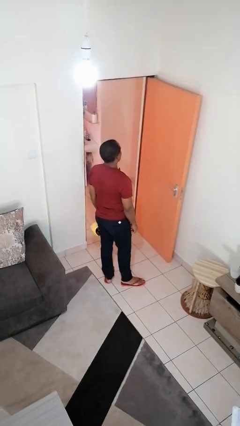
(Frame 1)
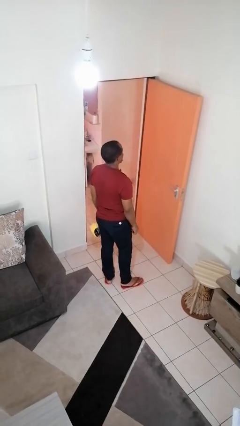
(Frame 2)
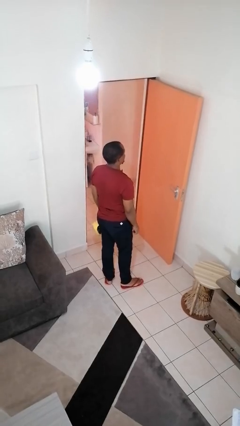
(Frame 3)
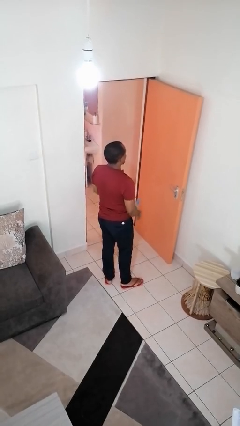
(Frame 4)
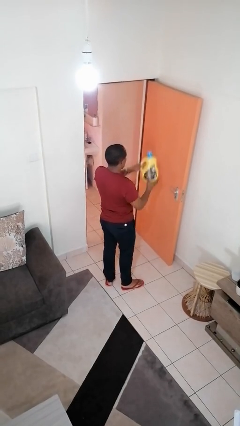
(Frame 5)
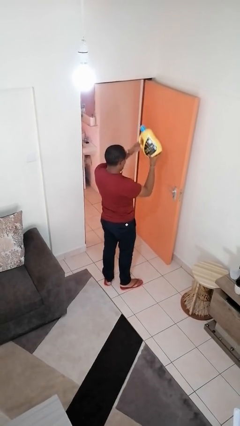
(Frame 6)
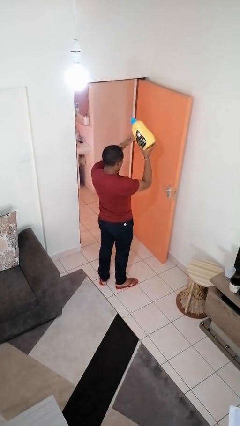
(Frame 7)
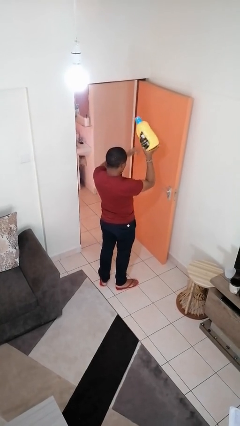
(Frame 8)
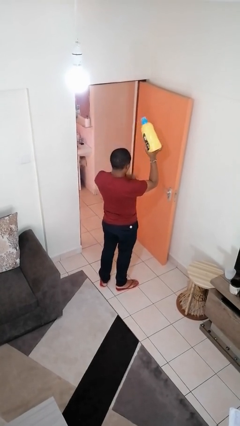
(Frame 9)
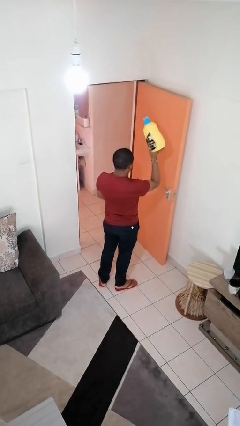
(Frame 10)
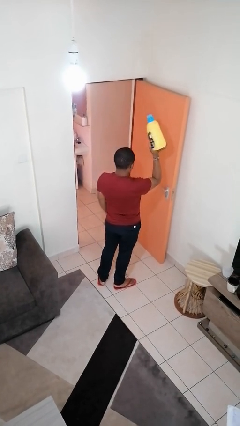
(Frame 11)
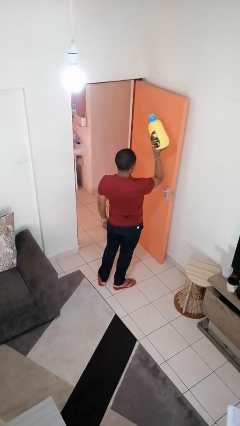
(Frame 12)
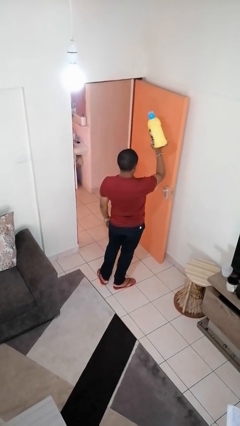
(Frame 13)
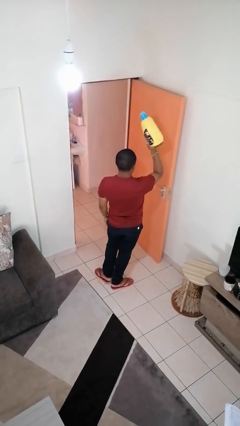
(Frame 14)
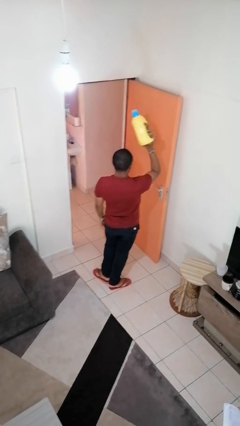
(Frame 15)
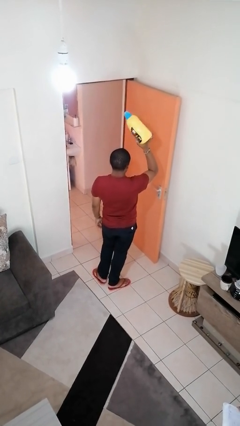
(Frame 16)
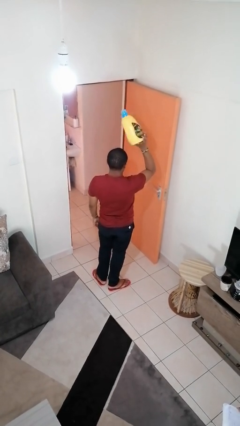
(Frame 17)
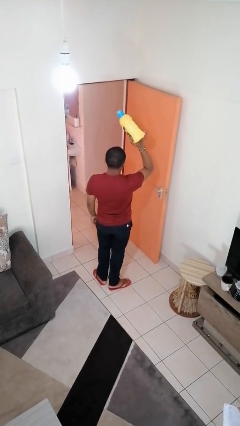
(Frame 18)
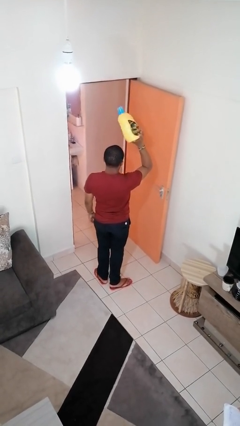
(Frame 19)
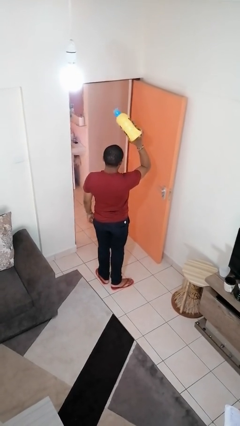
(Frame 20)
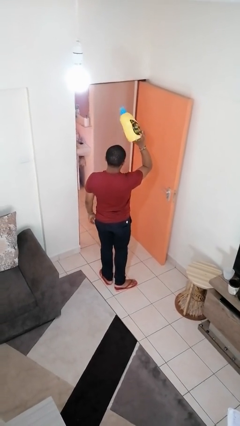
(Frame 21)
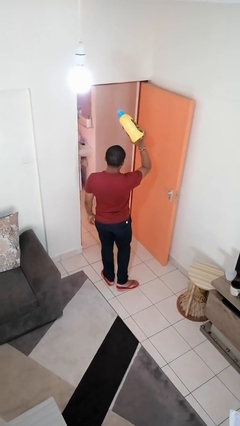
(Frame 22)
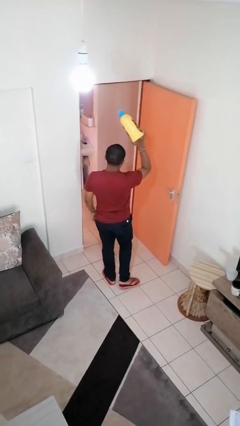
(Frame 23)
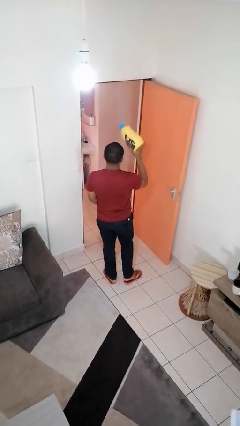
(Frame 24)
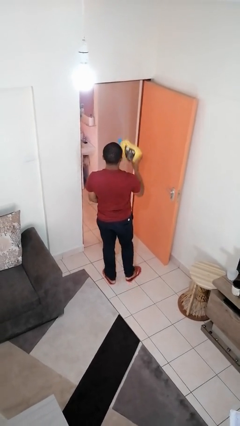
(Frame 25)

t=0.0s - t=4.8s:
person holds object above head

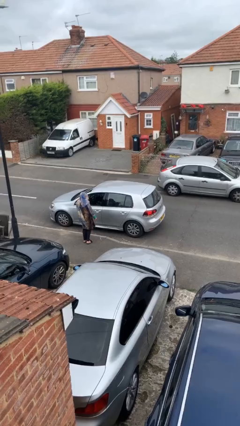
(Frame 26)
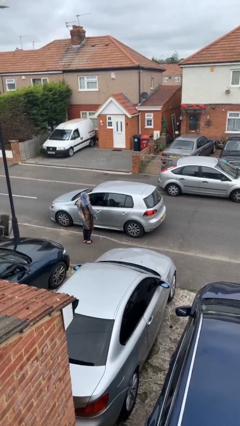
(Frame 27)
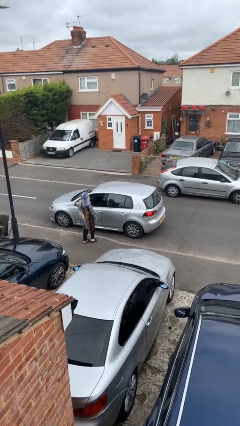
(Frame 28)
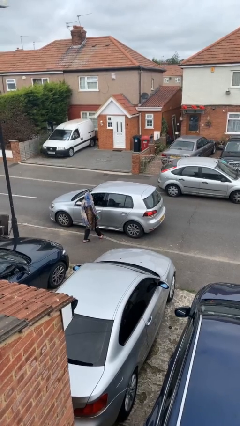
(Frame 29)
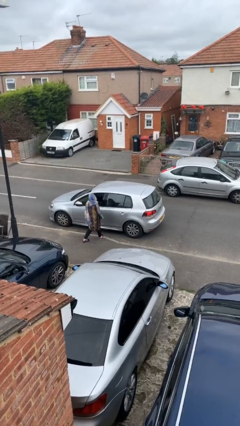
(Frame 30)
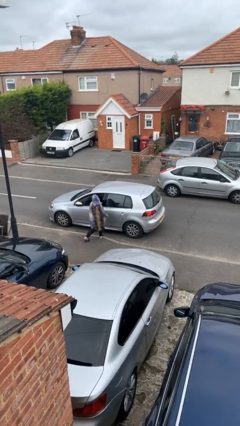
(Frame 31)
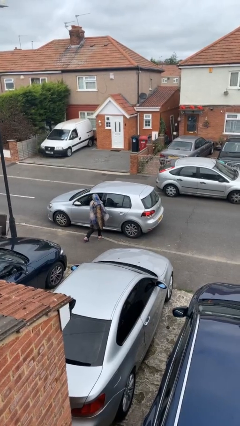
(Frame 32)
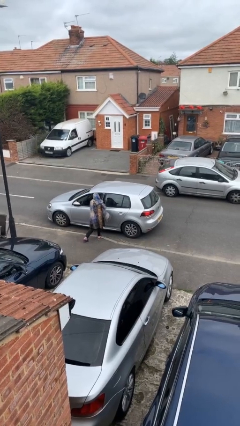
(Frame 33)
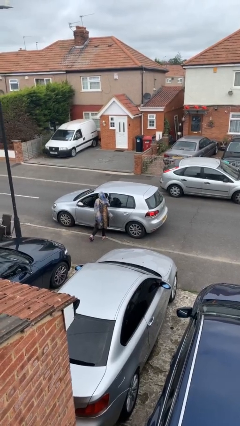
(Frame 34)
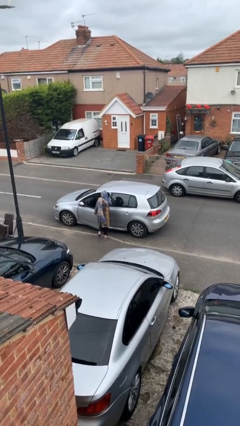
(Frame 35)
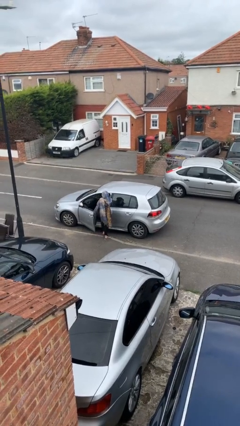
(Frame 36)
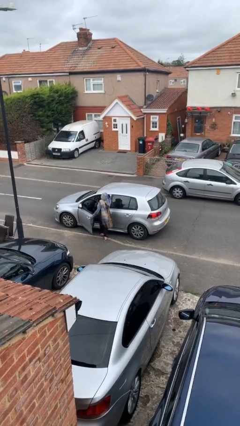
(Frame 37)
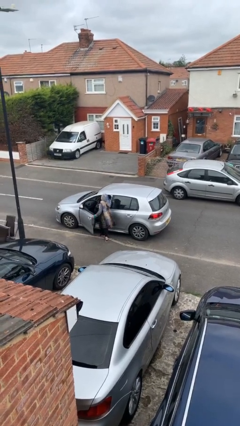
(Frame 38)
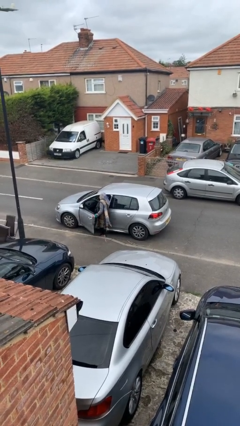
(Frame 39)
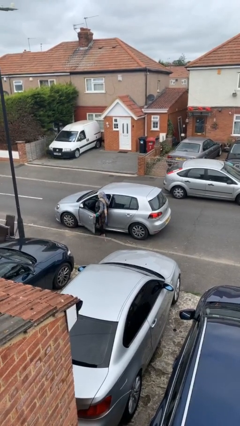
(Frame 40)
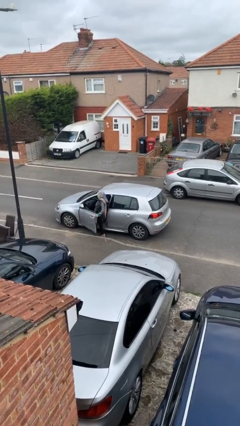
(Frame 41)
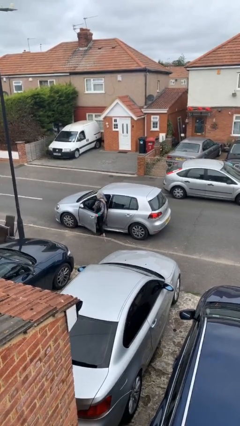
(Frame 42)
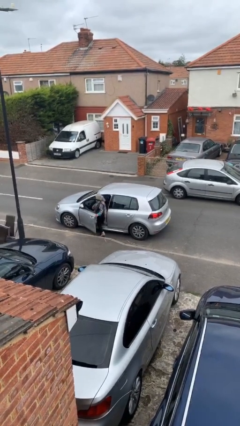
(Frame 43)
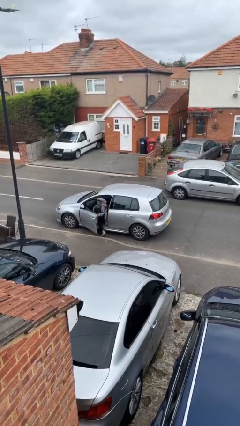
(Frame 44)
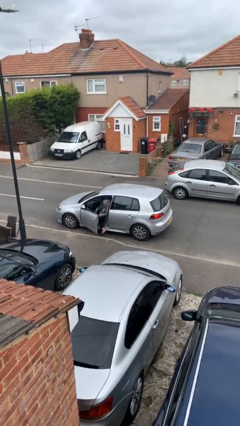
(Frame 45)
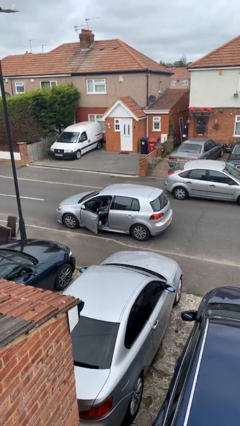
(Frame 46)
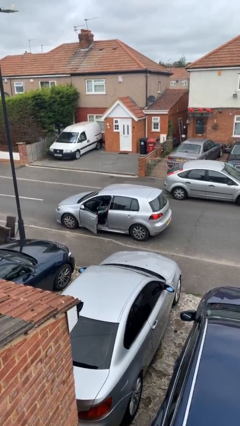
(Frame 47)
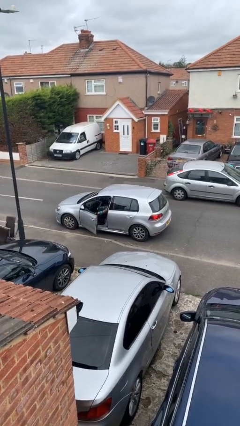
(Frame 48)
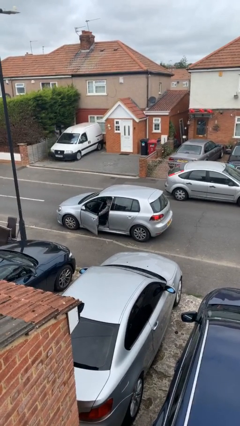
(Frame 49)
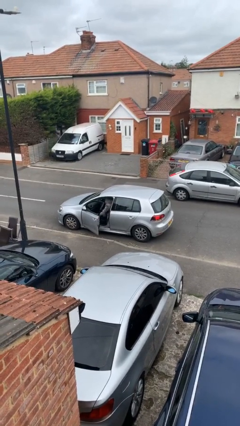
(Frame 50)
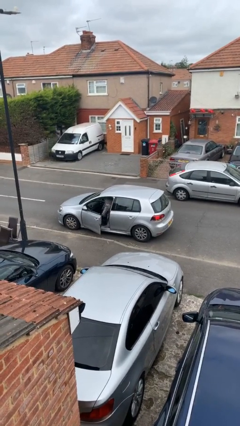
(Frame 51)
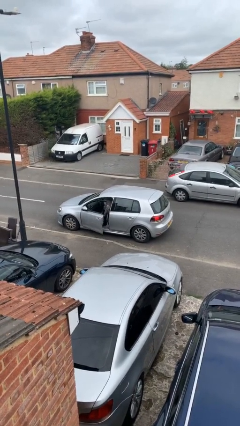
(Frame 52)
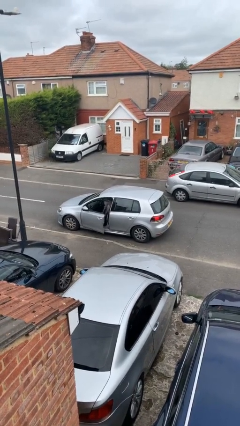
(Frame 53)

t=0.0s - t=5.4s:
car picks up person

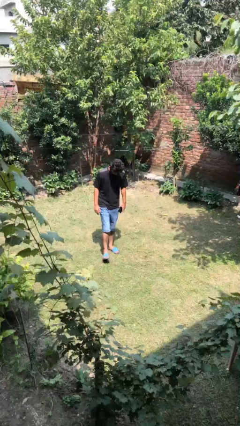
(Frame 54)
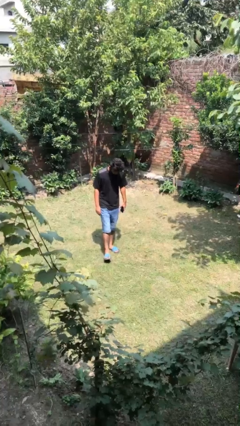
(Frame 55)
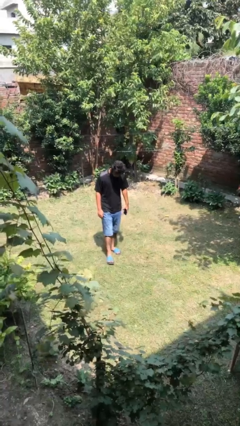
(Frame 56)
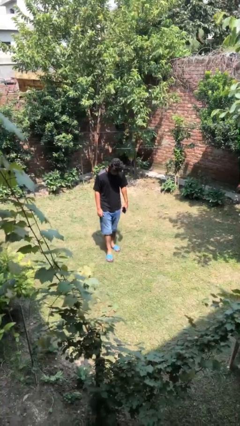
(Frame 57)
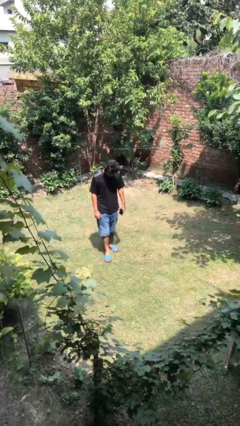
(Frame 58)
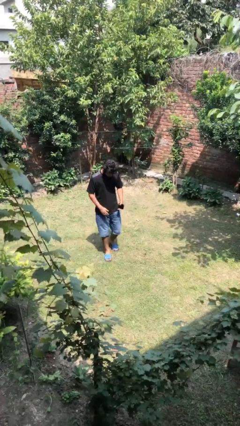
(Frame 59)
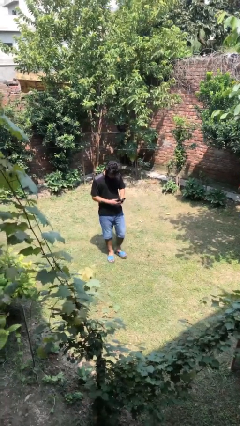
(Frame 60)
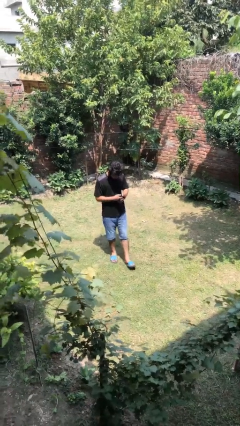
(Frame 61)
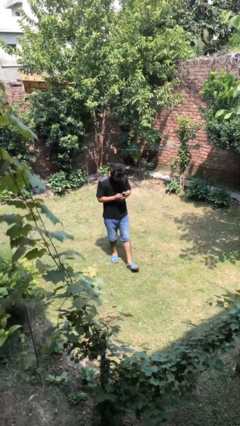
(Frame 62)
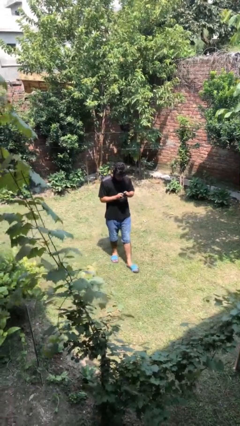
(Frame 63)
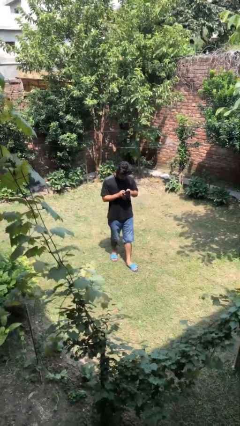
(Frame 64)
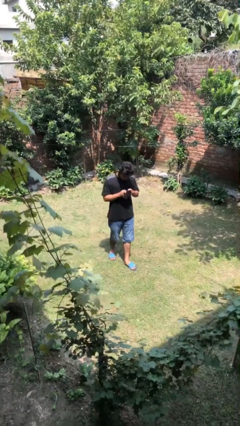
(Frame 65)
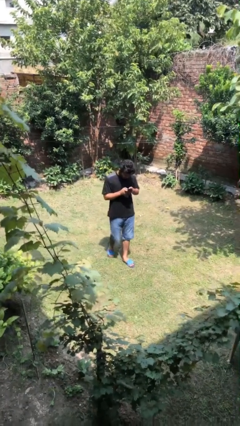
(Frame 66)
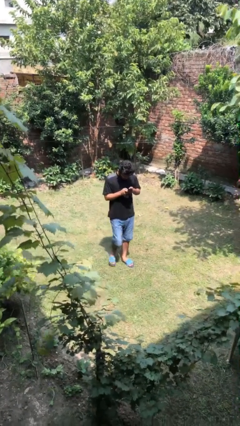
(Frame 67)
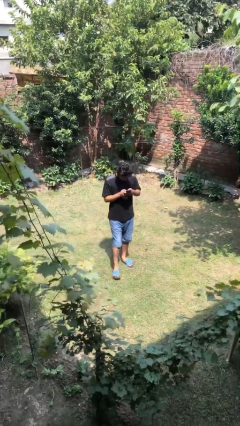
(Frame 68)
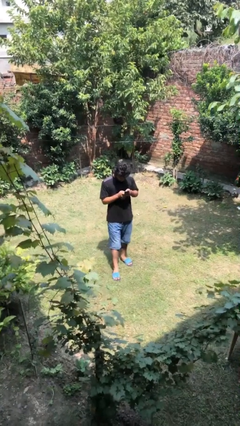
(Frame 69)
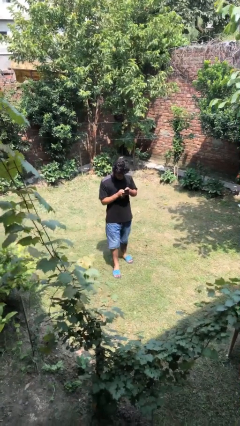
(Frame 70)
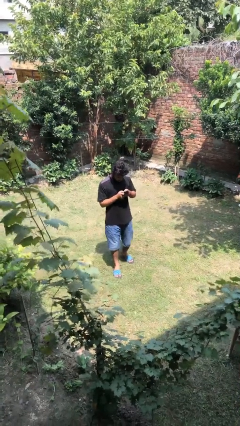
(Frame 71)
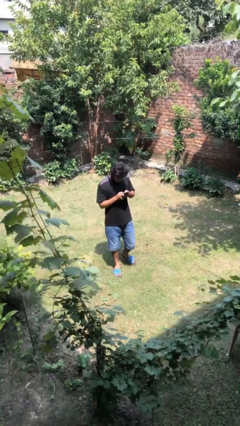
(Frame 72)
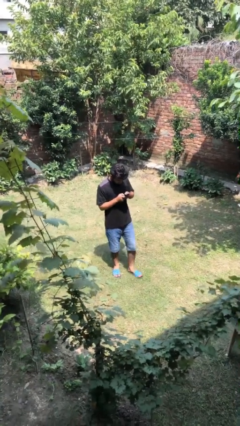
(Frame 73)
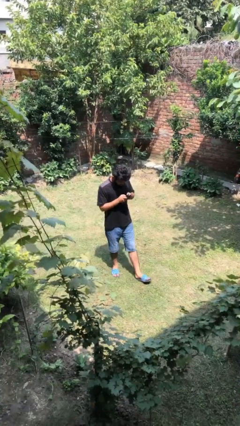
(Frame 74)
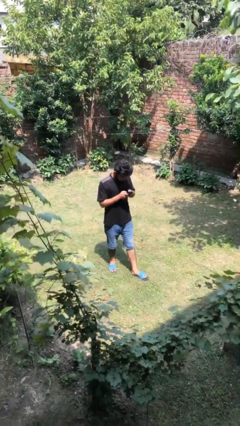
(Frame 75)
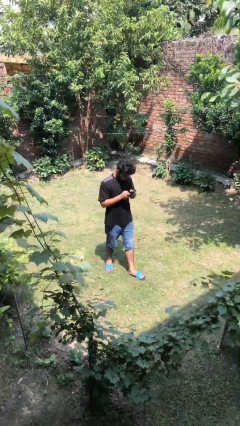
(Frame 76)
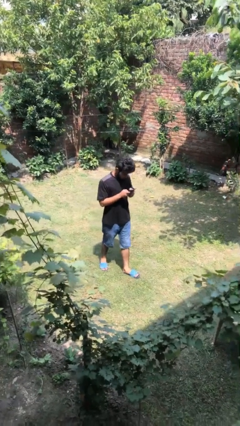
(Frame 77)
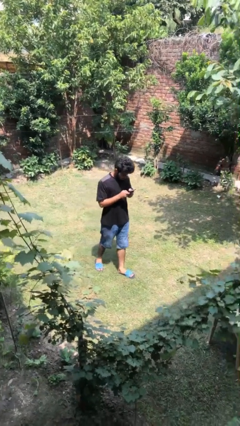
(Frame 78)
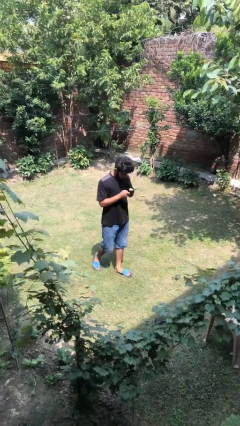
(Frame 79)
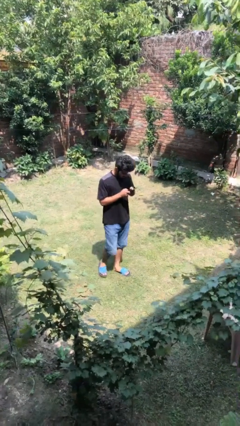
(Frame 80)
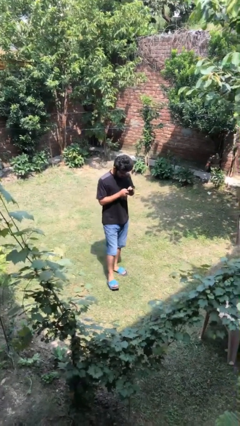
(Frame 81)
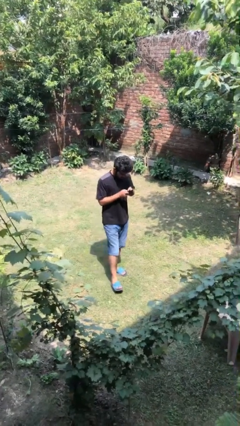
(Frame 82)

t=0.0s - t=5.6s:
person texts on phone

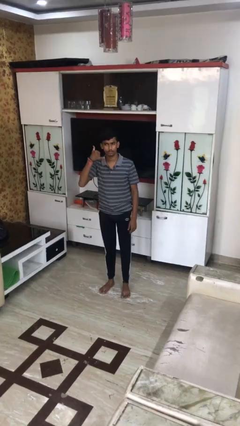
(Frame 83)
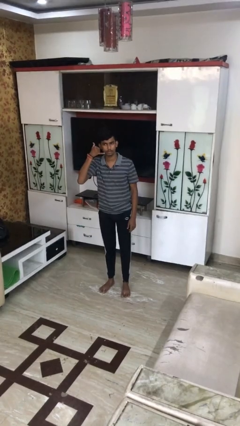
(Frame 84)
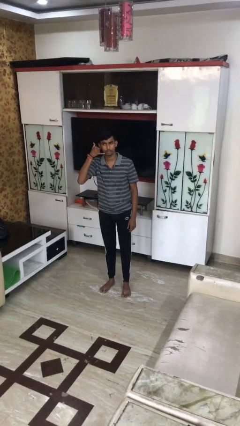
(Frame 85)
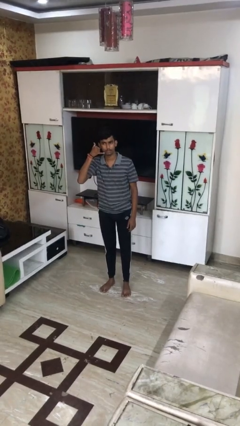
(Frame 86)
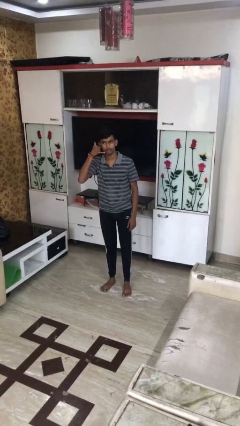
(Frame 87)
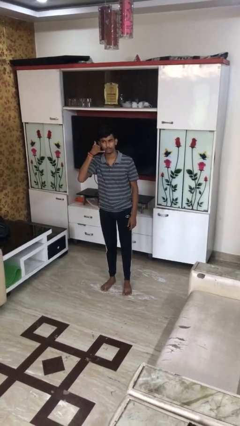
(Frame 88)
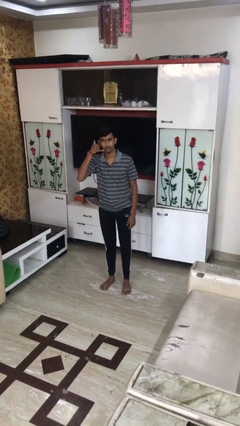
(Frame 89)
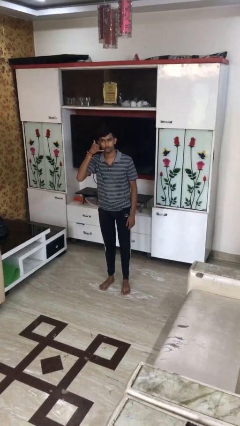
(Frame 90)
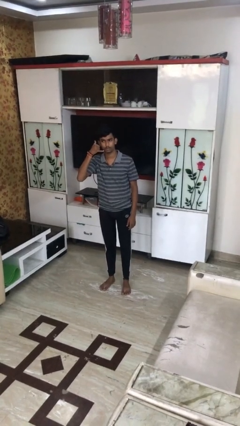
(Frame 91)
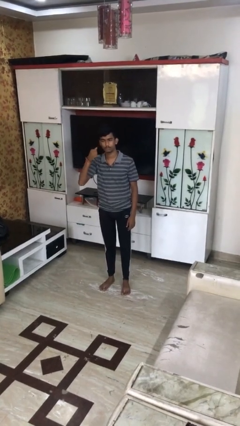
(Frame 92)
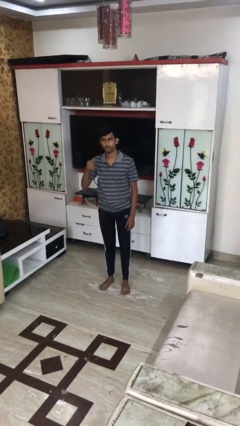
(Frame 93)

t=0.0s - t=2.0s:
person gestures call me
